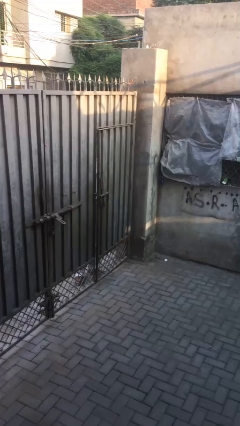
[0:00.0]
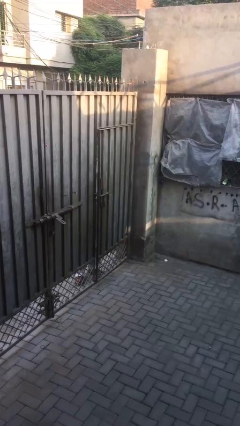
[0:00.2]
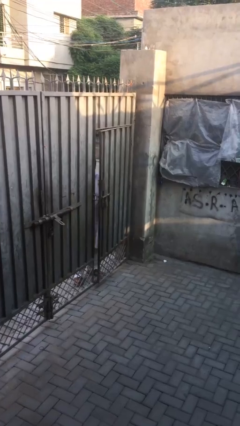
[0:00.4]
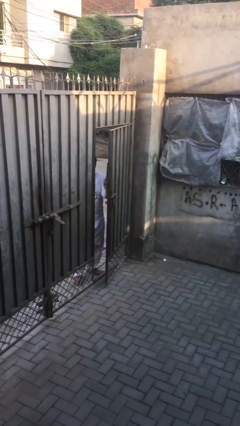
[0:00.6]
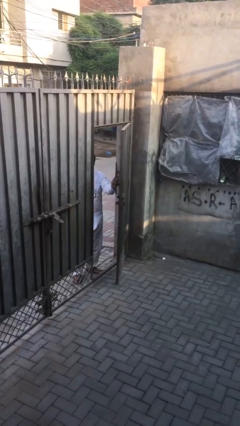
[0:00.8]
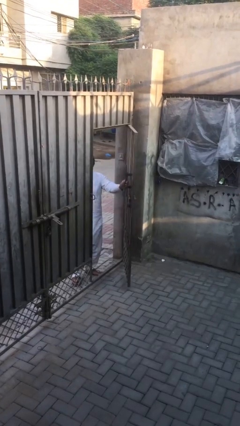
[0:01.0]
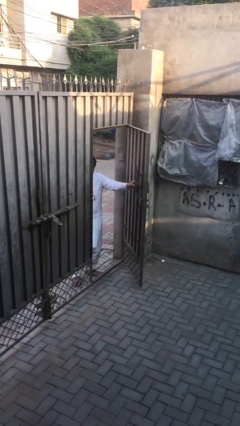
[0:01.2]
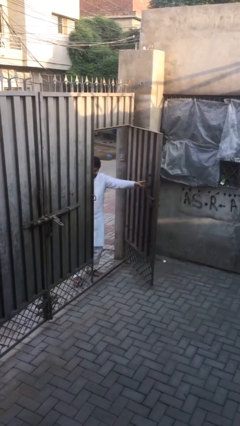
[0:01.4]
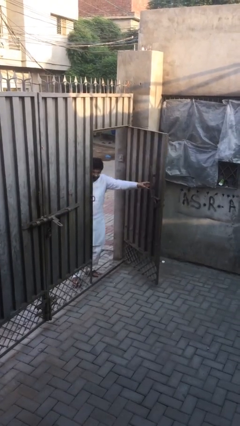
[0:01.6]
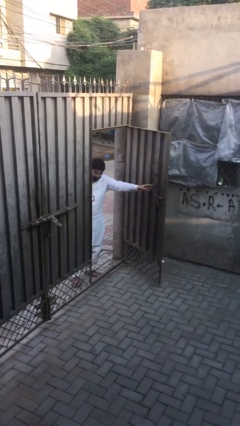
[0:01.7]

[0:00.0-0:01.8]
person opens facility door

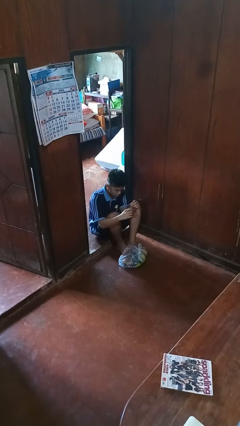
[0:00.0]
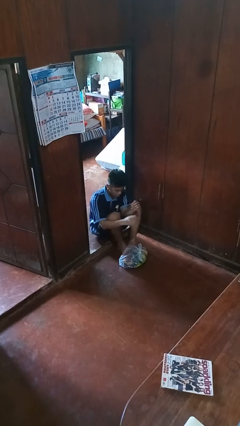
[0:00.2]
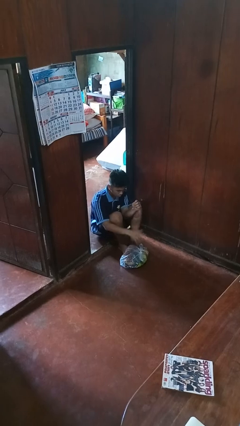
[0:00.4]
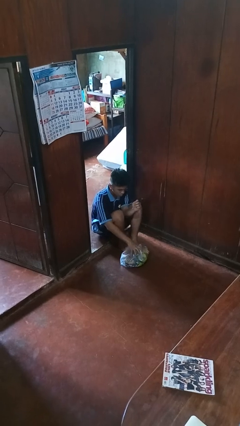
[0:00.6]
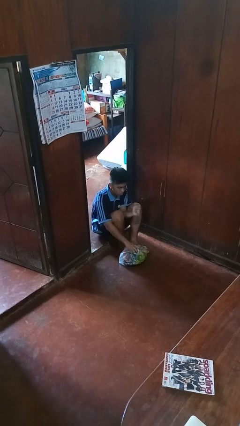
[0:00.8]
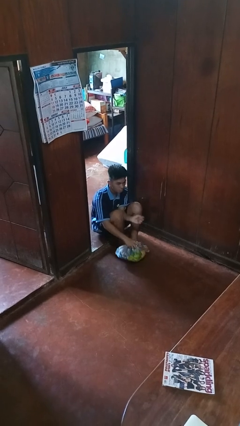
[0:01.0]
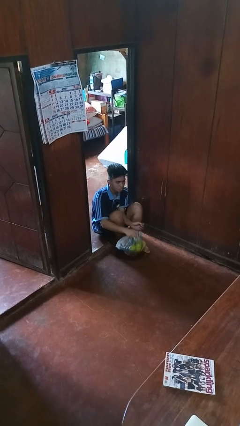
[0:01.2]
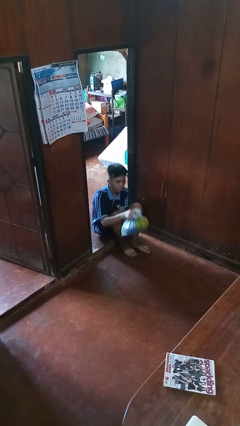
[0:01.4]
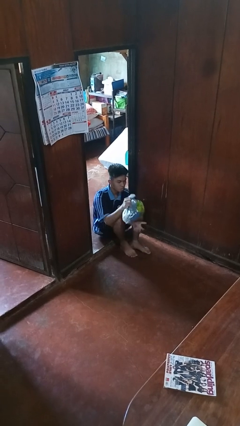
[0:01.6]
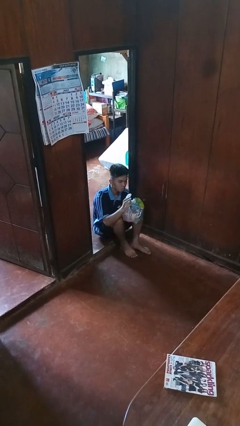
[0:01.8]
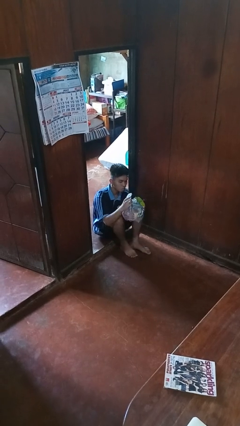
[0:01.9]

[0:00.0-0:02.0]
person picks up object from floor

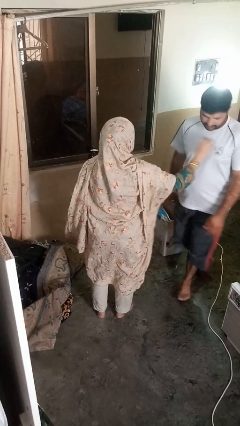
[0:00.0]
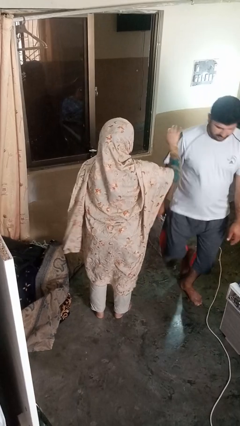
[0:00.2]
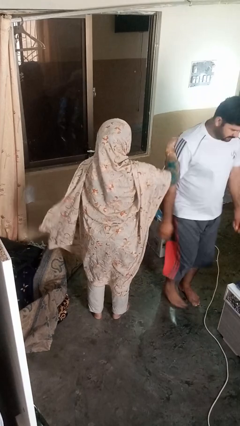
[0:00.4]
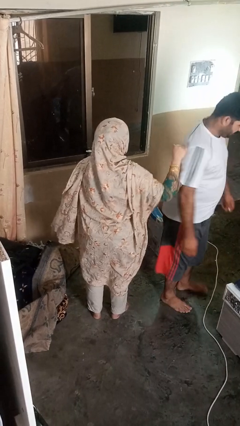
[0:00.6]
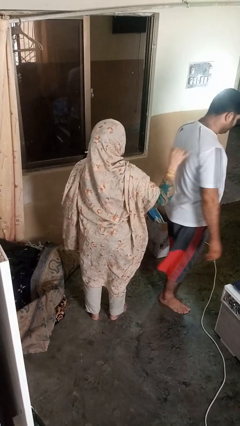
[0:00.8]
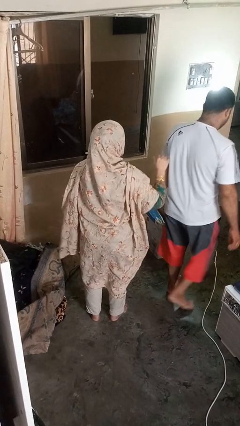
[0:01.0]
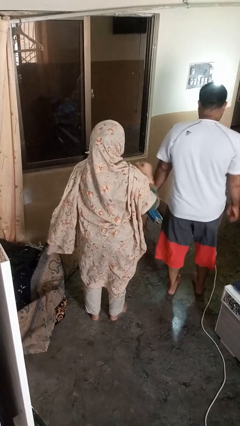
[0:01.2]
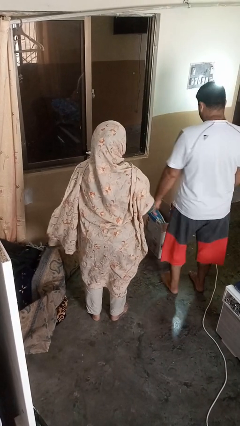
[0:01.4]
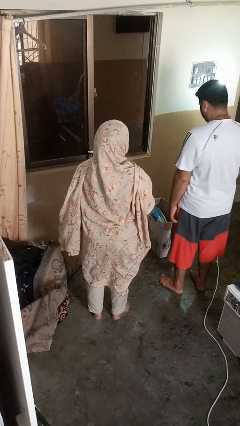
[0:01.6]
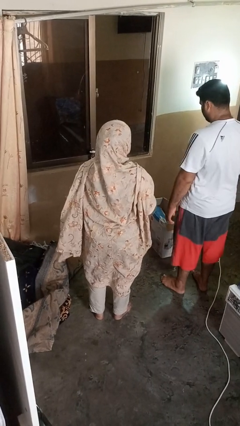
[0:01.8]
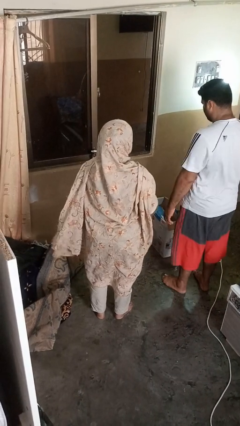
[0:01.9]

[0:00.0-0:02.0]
person spins person around

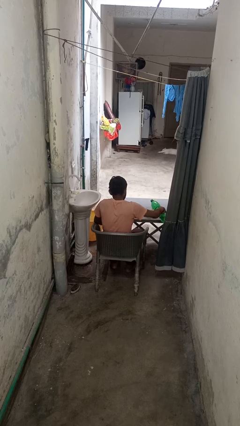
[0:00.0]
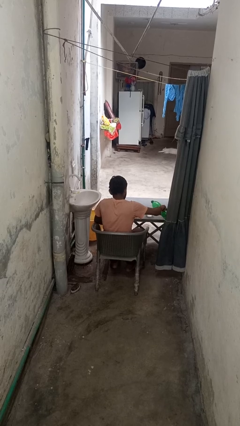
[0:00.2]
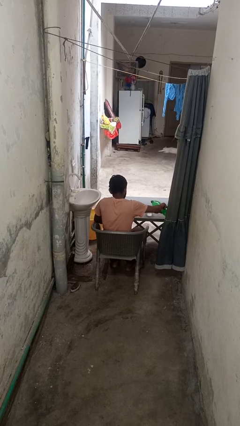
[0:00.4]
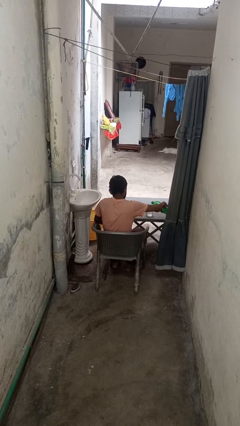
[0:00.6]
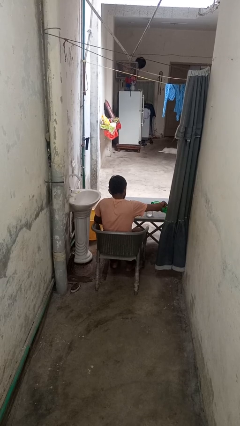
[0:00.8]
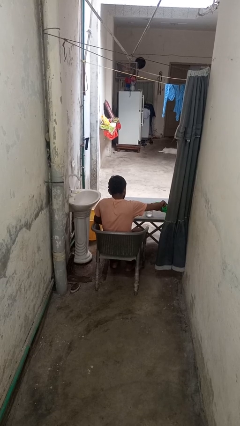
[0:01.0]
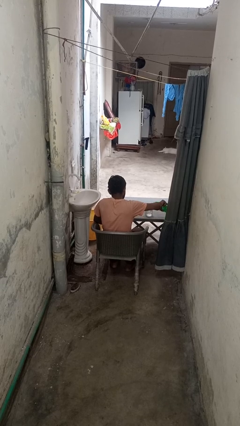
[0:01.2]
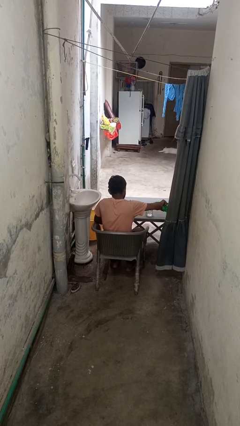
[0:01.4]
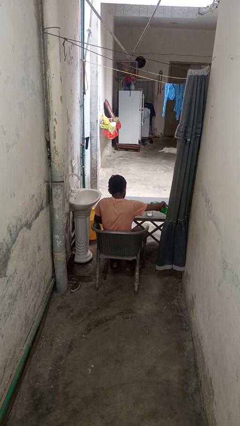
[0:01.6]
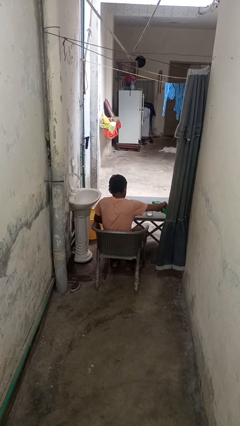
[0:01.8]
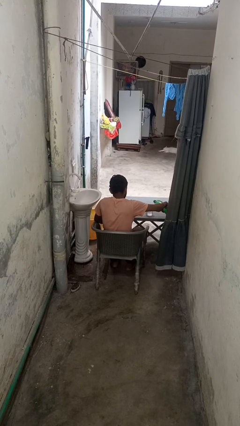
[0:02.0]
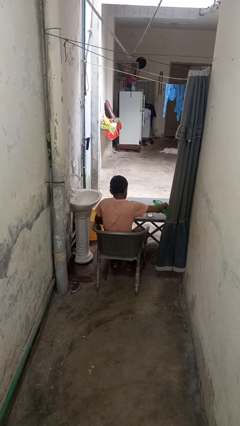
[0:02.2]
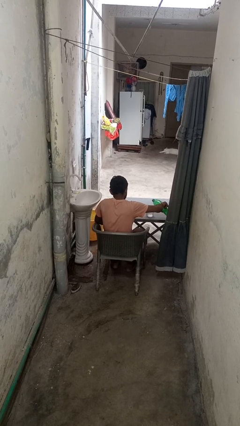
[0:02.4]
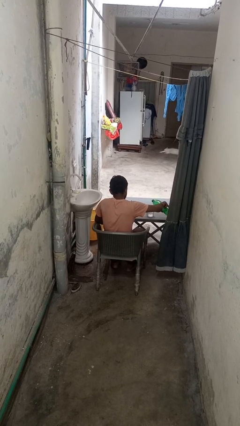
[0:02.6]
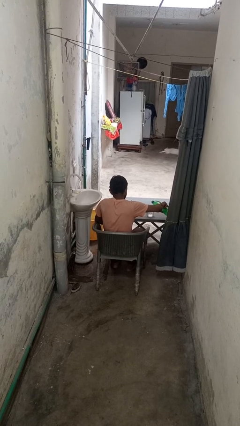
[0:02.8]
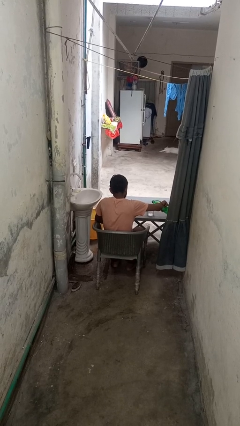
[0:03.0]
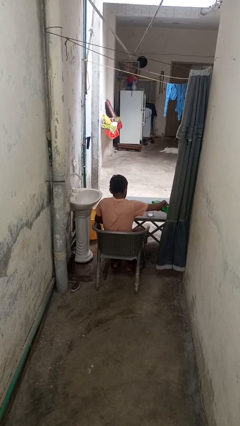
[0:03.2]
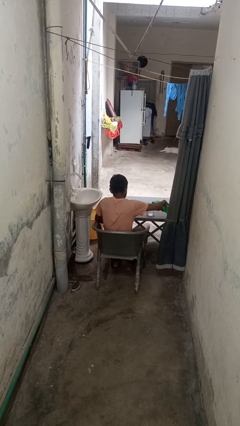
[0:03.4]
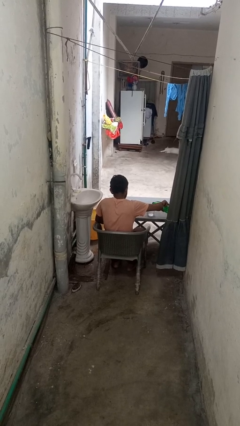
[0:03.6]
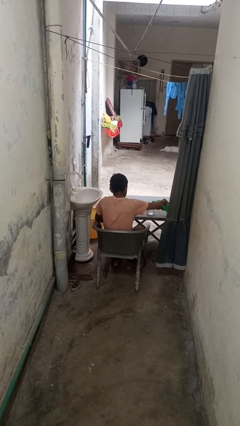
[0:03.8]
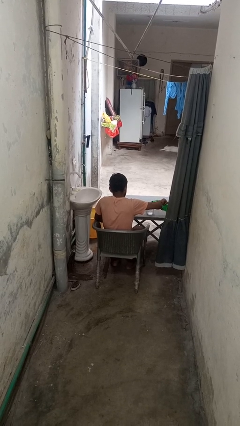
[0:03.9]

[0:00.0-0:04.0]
person pours liquid into cup

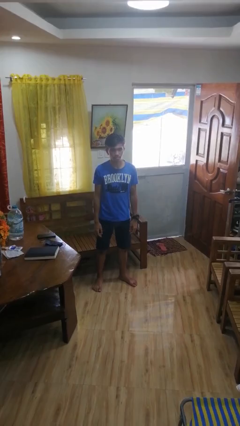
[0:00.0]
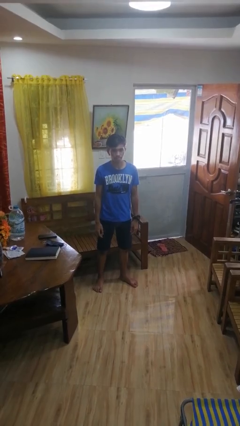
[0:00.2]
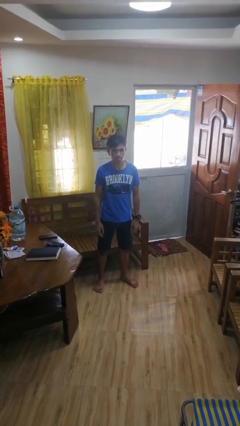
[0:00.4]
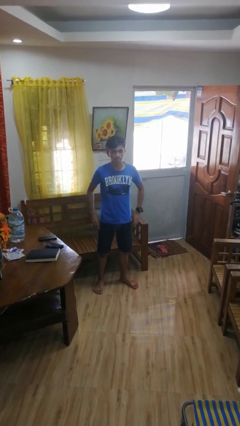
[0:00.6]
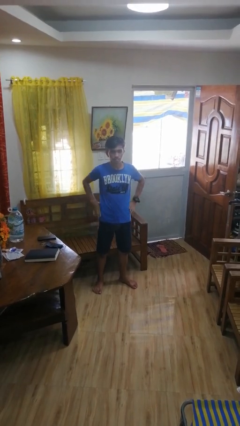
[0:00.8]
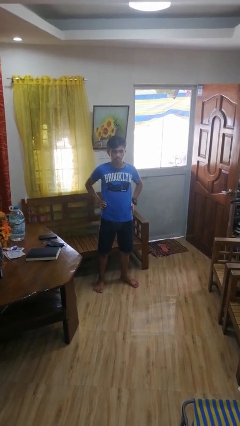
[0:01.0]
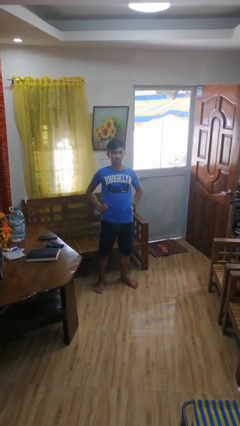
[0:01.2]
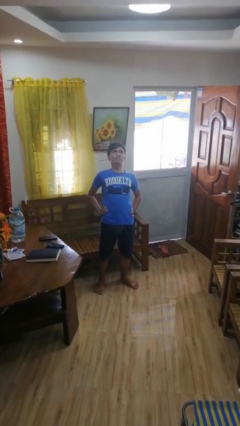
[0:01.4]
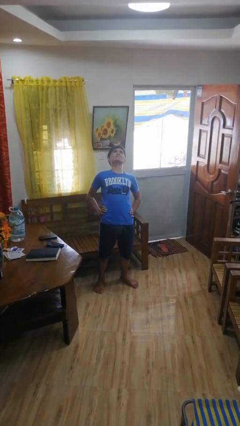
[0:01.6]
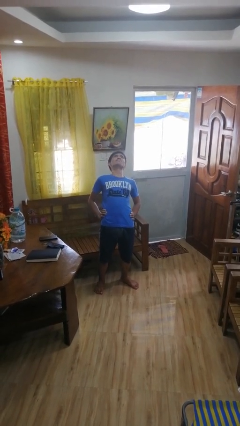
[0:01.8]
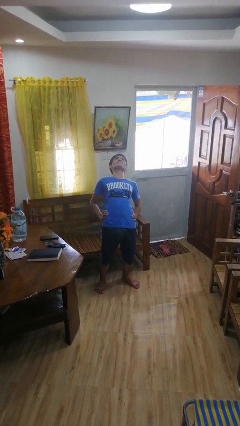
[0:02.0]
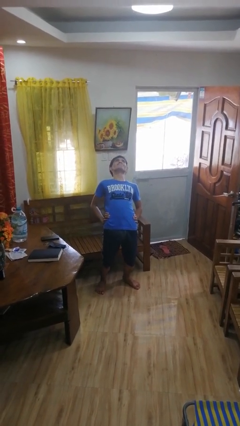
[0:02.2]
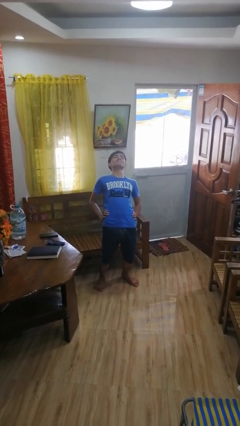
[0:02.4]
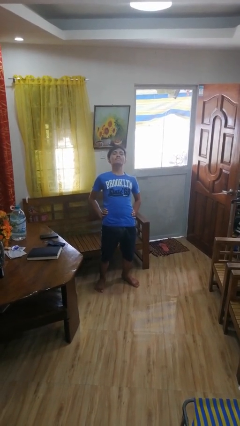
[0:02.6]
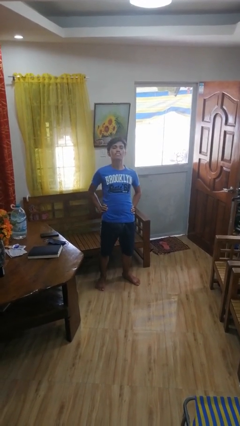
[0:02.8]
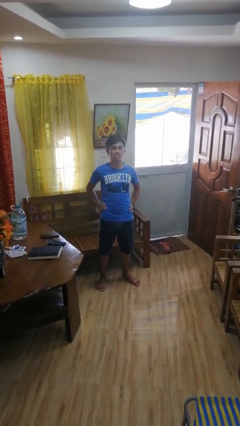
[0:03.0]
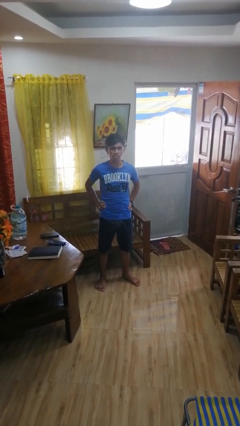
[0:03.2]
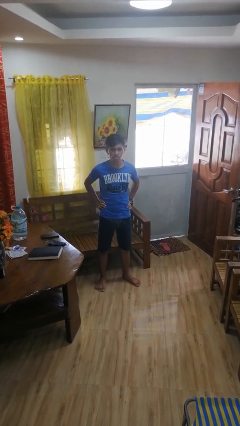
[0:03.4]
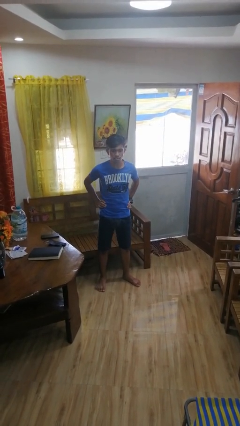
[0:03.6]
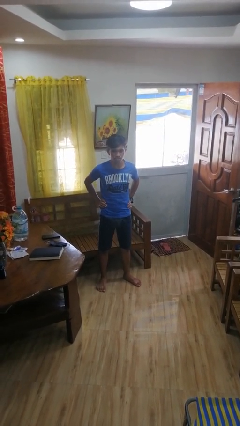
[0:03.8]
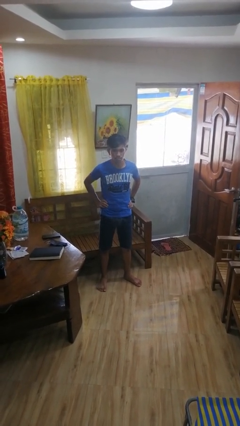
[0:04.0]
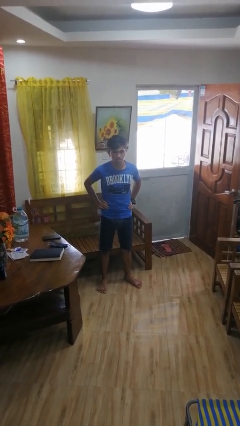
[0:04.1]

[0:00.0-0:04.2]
person stretches back

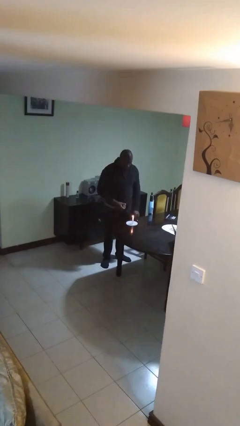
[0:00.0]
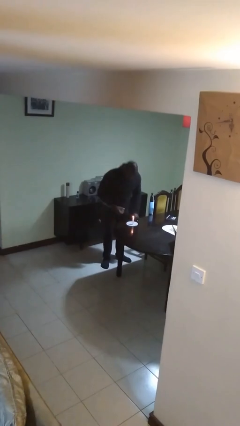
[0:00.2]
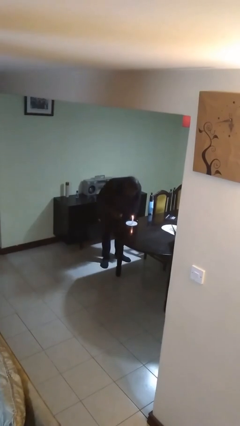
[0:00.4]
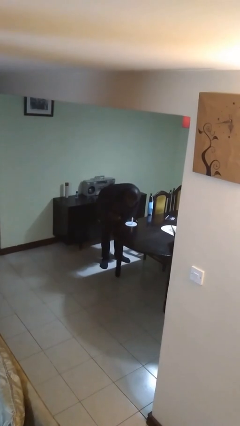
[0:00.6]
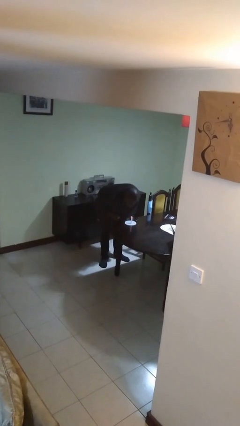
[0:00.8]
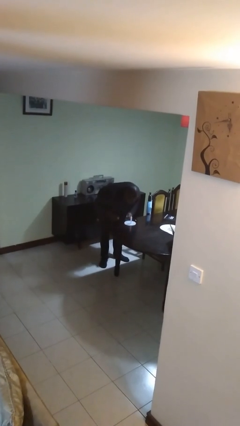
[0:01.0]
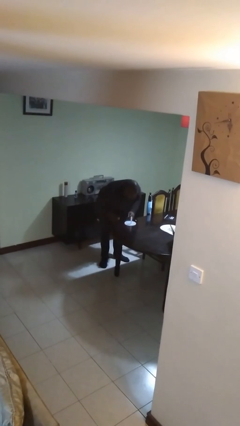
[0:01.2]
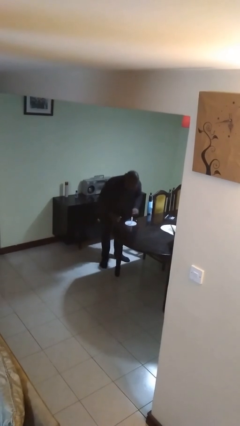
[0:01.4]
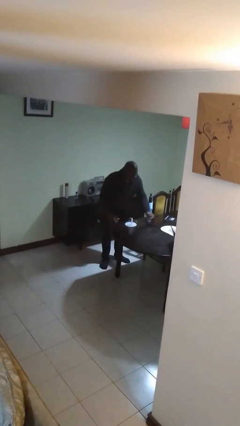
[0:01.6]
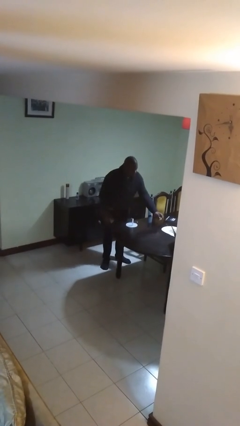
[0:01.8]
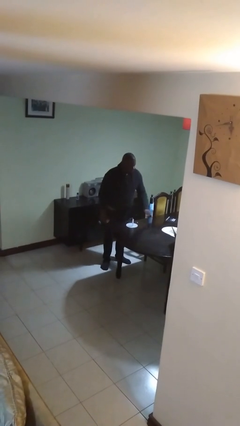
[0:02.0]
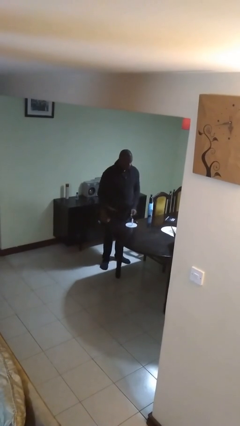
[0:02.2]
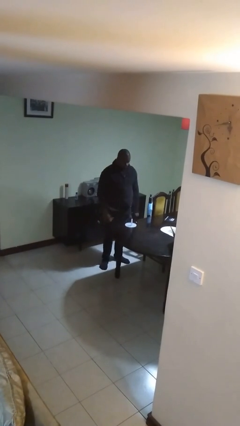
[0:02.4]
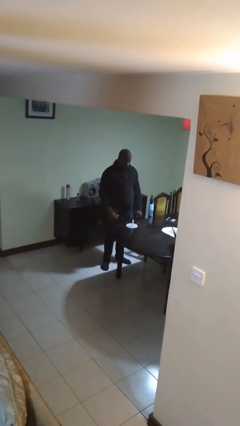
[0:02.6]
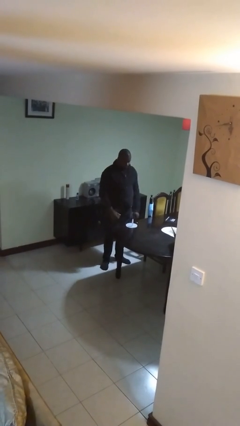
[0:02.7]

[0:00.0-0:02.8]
person extinguishes candle

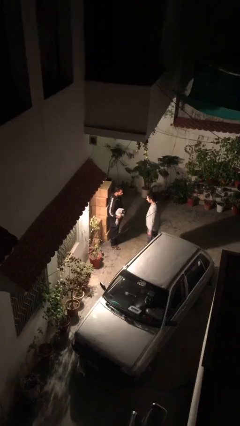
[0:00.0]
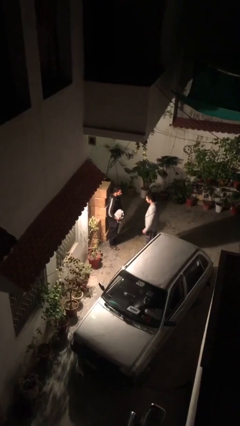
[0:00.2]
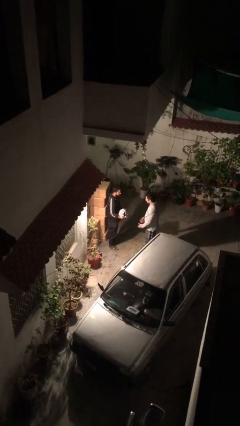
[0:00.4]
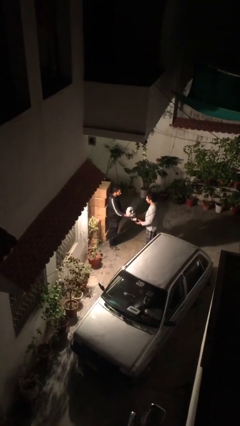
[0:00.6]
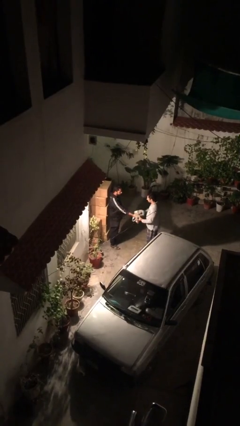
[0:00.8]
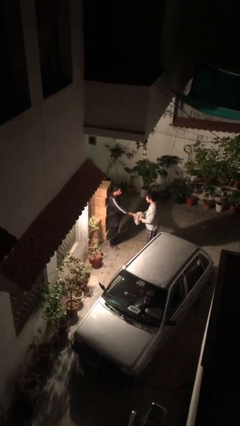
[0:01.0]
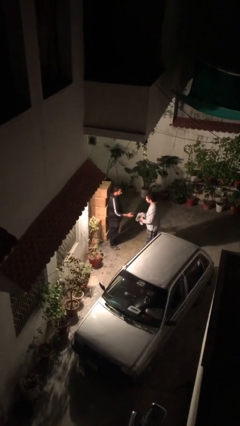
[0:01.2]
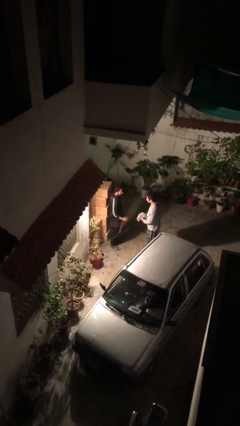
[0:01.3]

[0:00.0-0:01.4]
person transfers object to person
